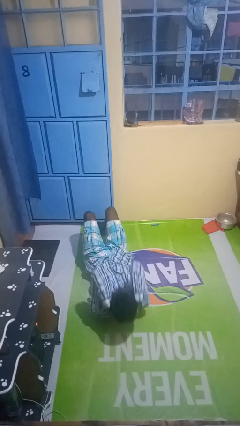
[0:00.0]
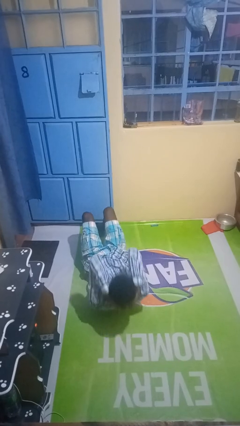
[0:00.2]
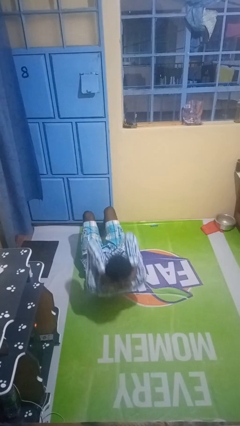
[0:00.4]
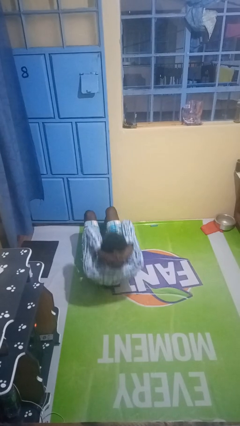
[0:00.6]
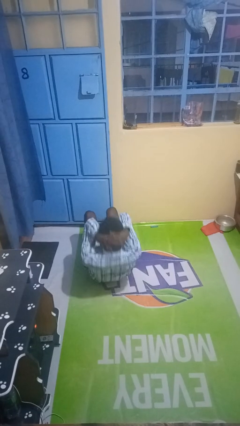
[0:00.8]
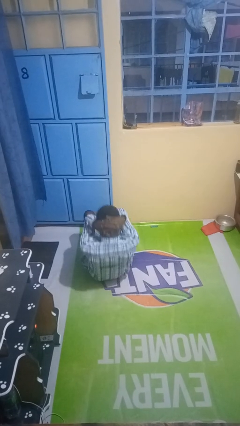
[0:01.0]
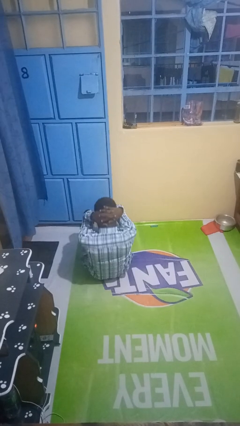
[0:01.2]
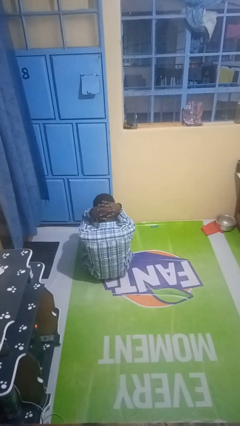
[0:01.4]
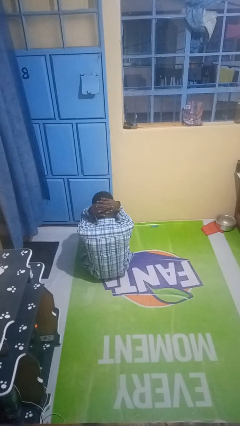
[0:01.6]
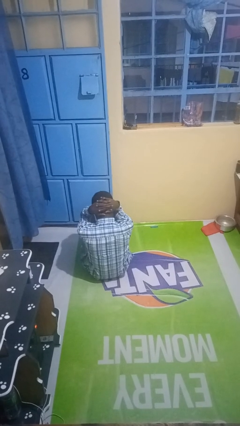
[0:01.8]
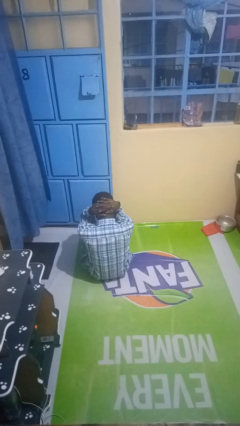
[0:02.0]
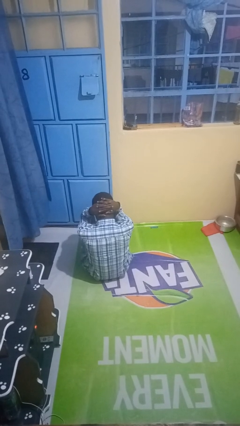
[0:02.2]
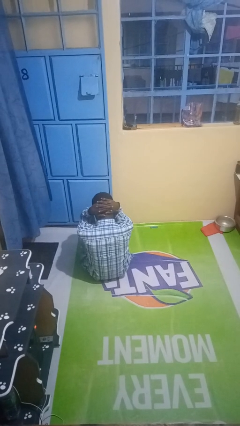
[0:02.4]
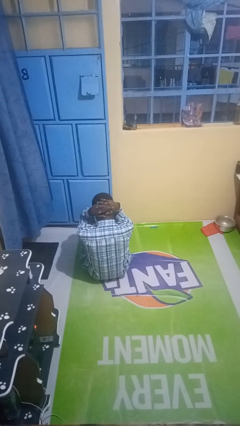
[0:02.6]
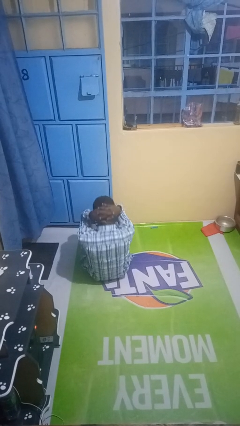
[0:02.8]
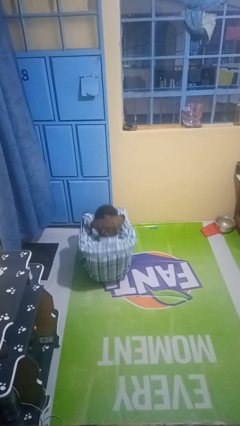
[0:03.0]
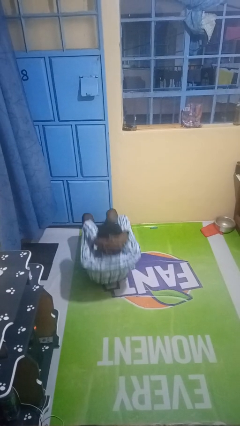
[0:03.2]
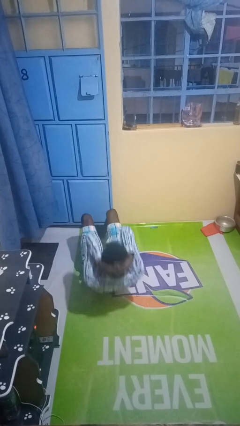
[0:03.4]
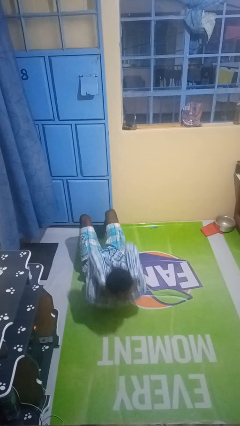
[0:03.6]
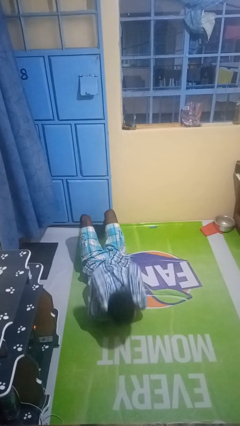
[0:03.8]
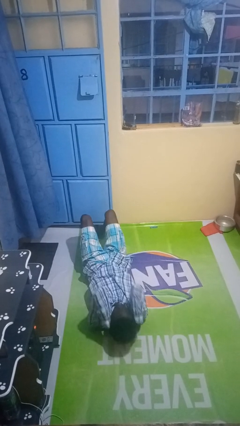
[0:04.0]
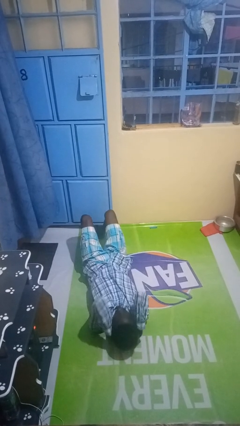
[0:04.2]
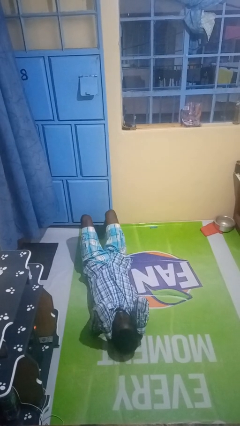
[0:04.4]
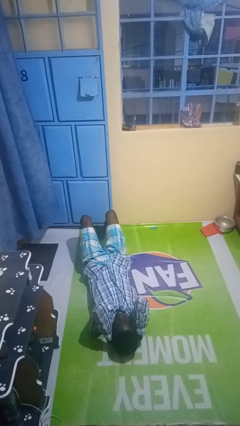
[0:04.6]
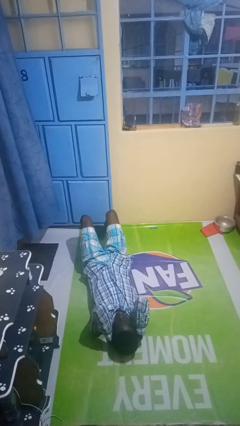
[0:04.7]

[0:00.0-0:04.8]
person exercises with situp

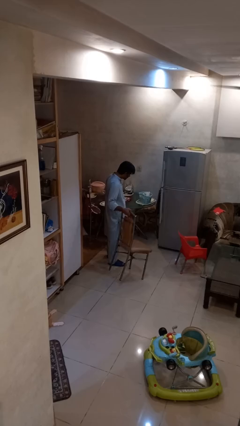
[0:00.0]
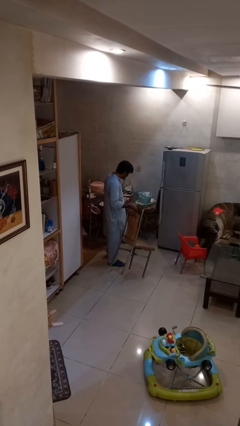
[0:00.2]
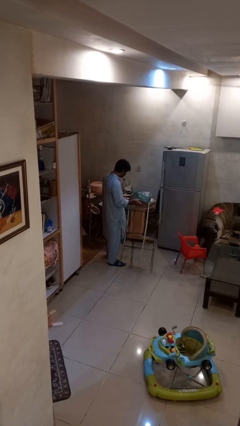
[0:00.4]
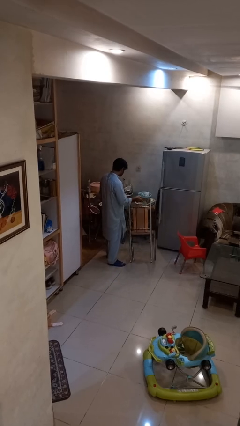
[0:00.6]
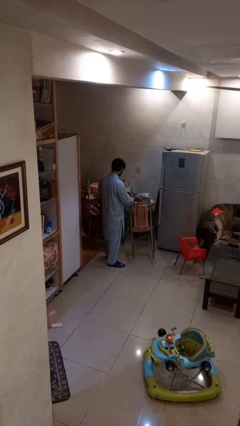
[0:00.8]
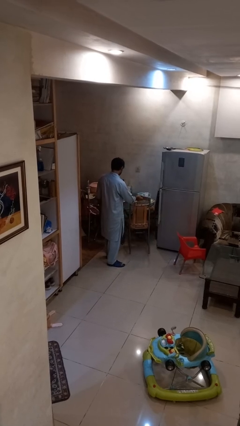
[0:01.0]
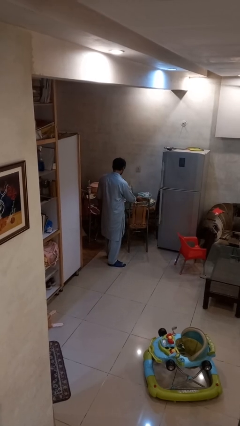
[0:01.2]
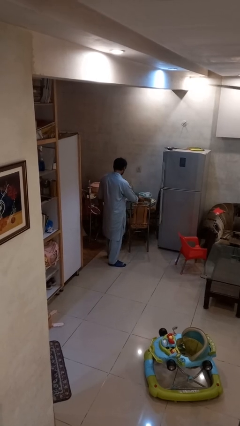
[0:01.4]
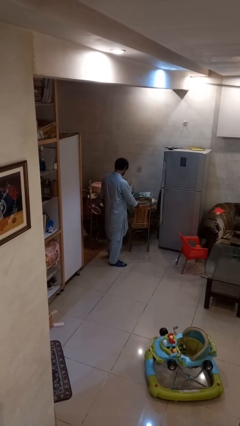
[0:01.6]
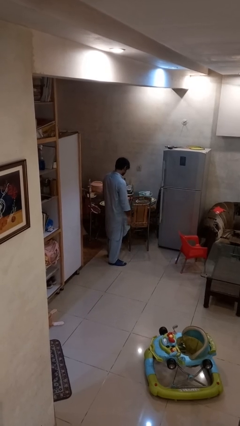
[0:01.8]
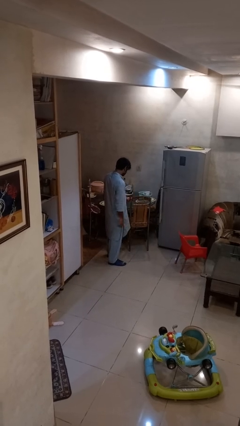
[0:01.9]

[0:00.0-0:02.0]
person pushes in chair

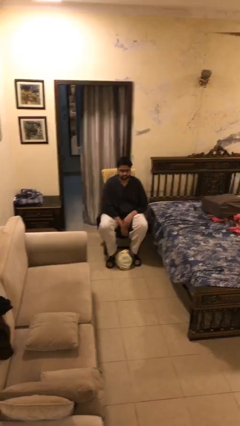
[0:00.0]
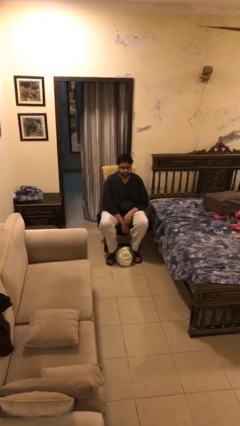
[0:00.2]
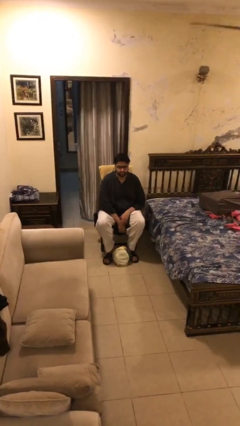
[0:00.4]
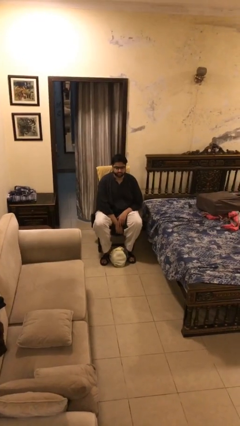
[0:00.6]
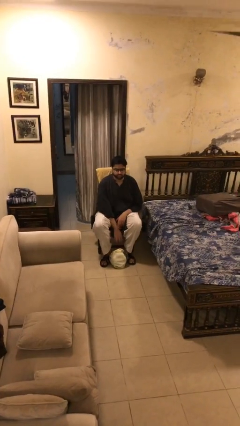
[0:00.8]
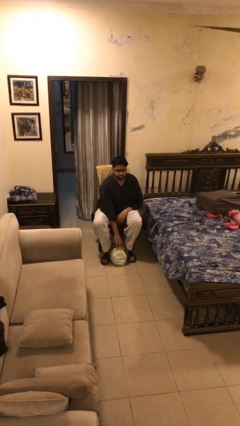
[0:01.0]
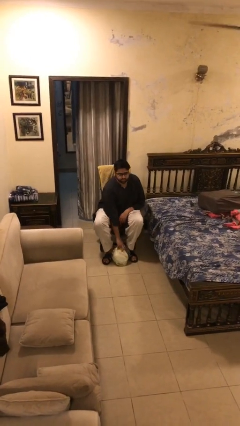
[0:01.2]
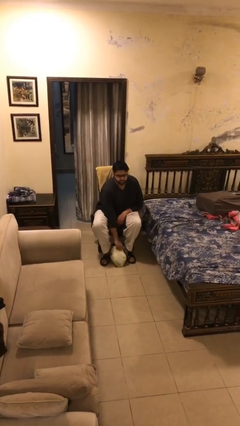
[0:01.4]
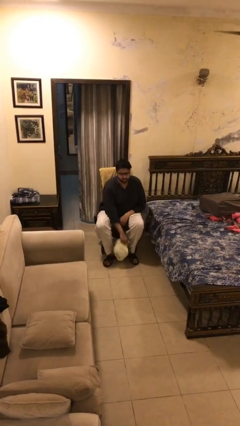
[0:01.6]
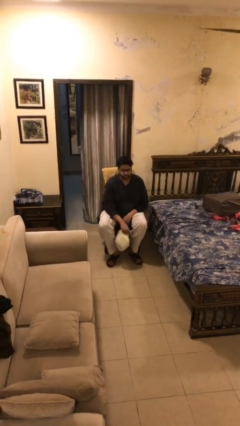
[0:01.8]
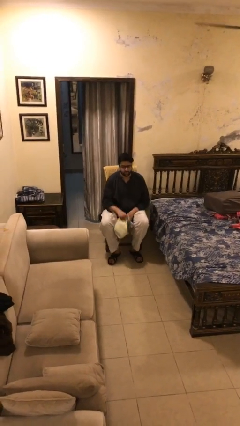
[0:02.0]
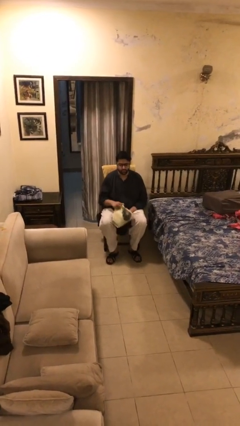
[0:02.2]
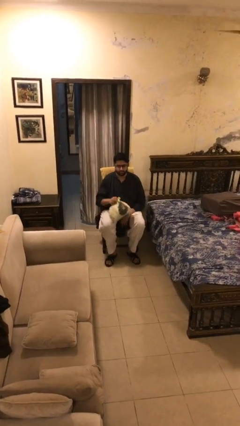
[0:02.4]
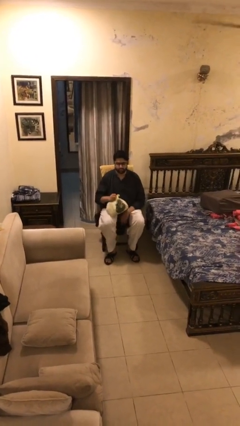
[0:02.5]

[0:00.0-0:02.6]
person picks up object from floor

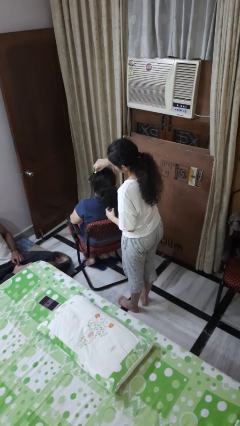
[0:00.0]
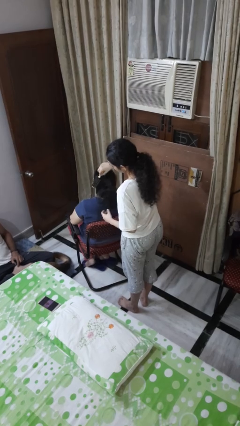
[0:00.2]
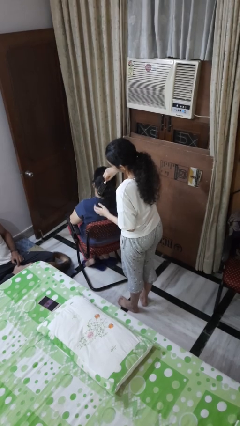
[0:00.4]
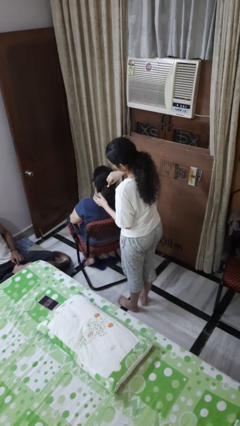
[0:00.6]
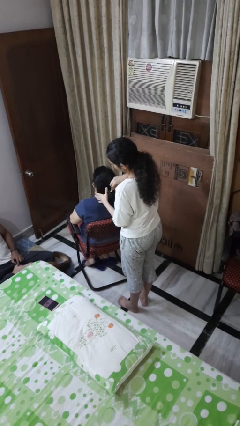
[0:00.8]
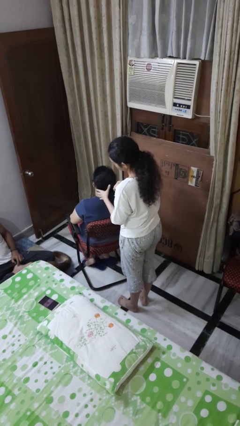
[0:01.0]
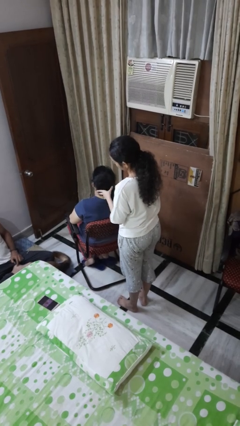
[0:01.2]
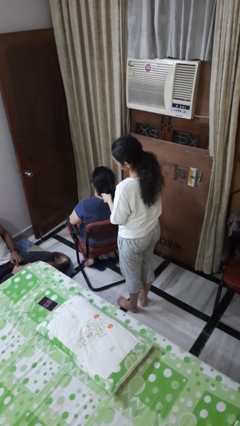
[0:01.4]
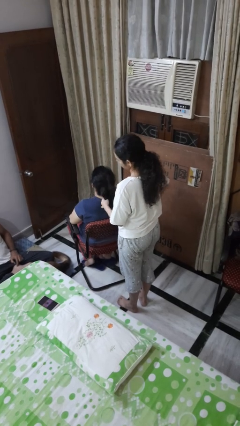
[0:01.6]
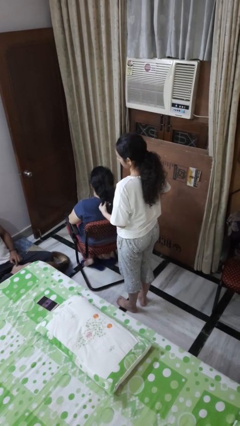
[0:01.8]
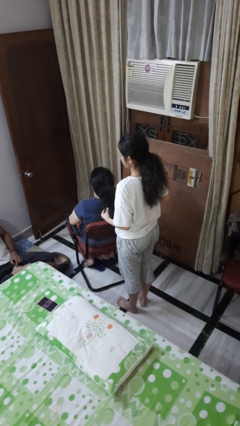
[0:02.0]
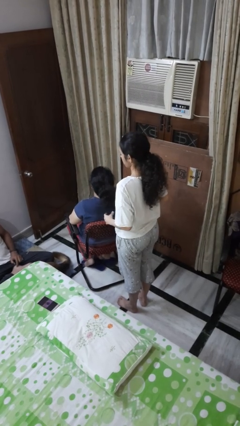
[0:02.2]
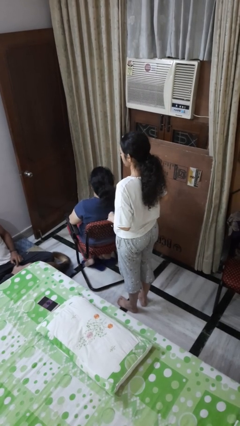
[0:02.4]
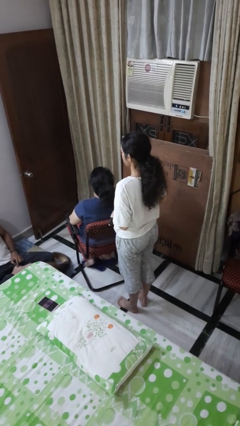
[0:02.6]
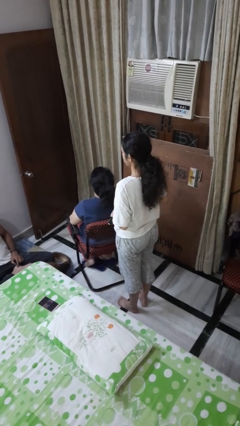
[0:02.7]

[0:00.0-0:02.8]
person brushes hair of person

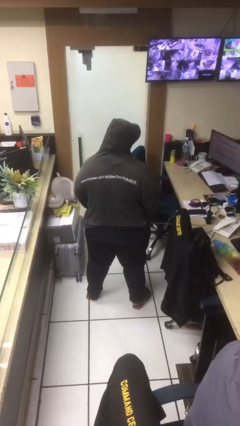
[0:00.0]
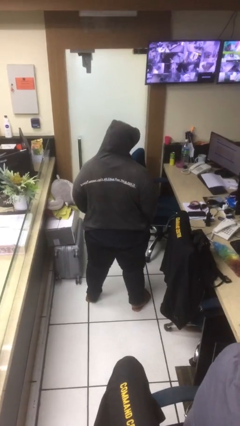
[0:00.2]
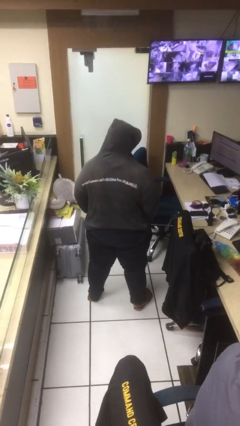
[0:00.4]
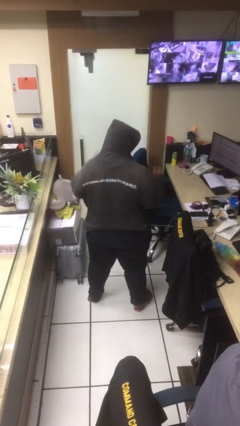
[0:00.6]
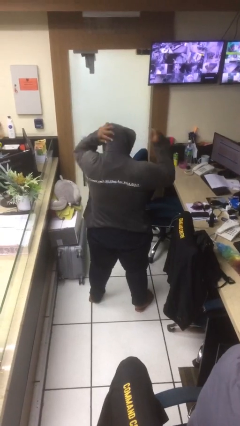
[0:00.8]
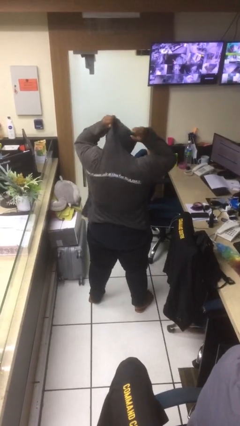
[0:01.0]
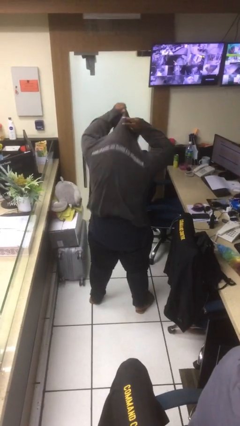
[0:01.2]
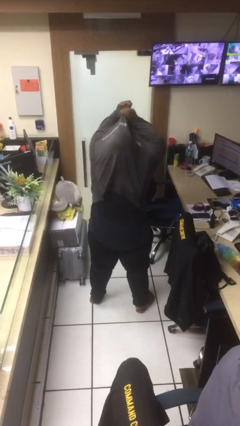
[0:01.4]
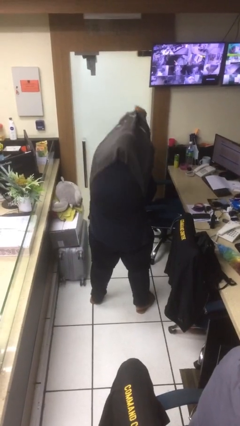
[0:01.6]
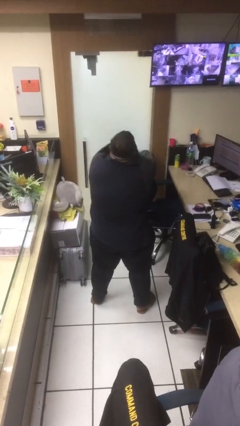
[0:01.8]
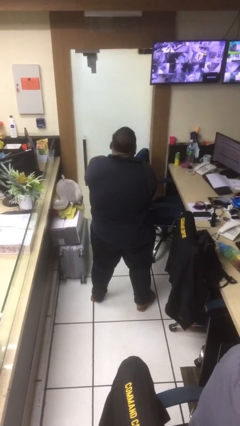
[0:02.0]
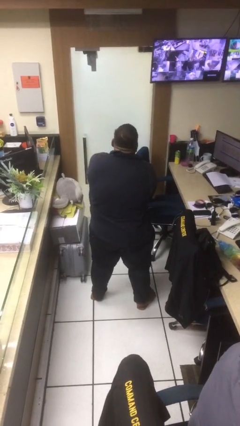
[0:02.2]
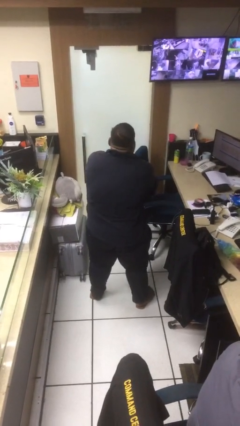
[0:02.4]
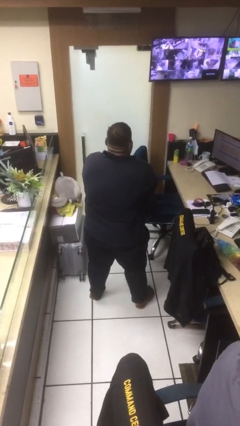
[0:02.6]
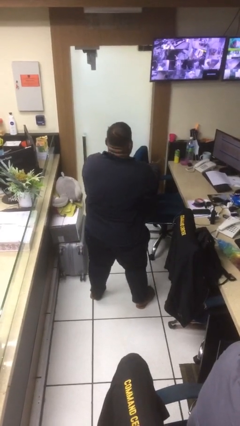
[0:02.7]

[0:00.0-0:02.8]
person takes off hoodie

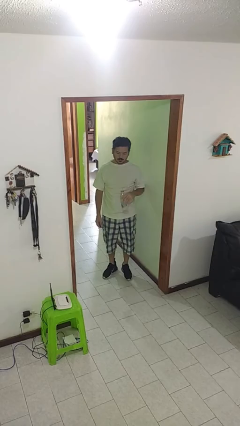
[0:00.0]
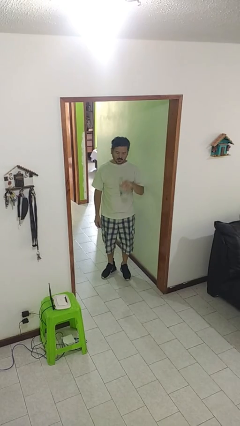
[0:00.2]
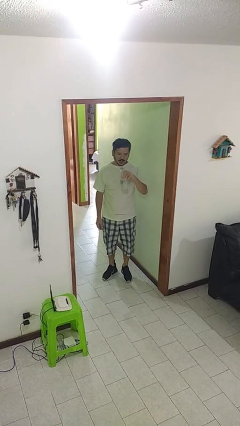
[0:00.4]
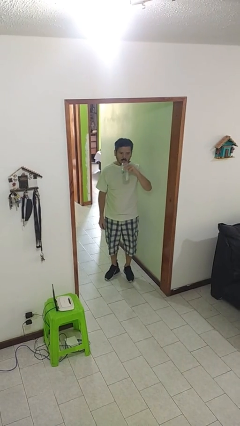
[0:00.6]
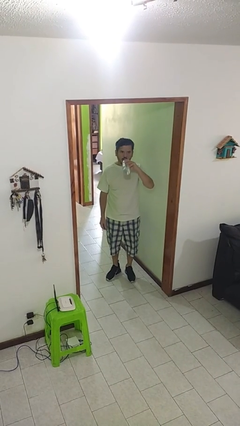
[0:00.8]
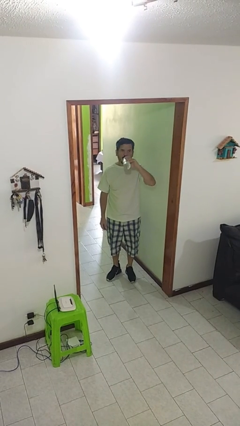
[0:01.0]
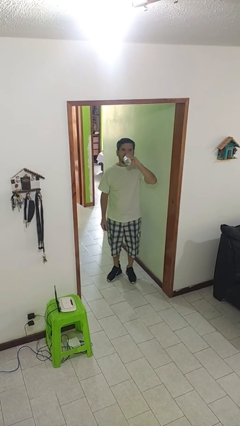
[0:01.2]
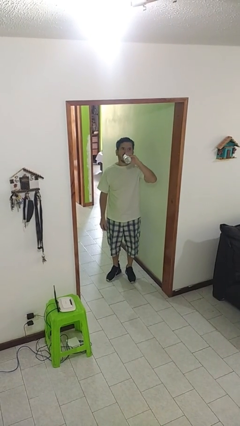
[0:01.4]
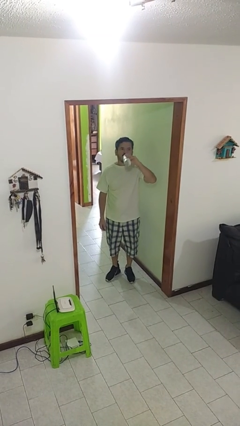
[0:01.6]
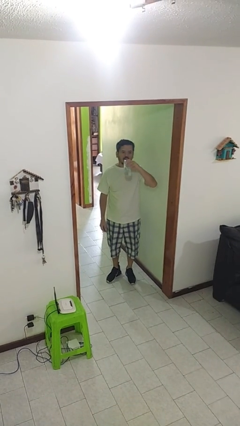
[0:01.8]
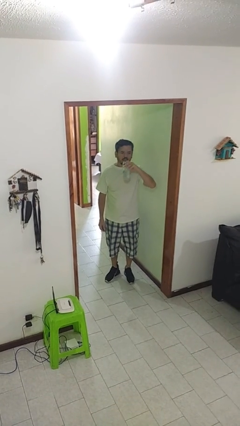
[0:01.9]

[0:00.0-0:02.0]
person drinks from bottle
